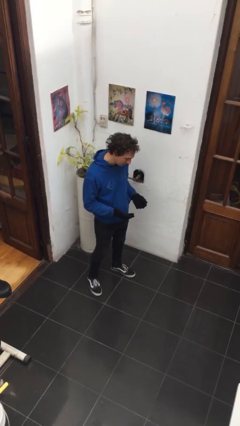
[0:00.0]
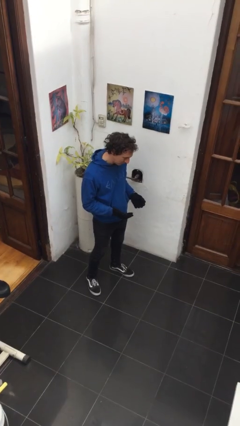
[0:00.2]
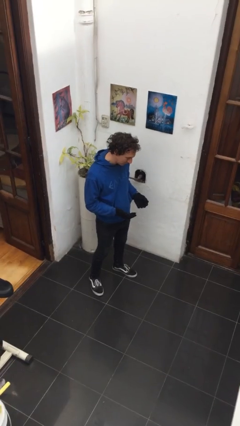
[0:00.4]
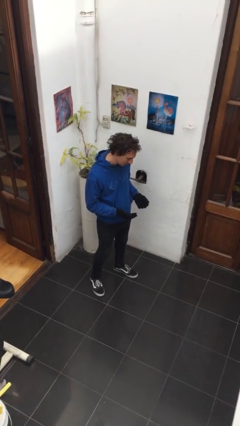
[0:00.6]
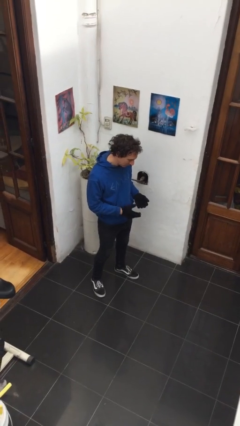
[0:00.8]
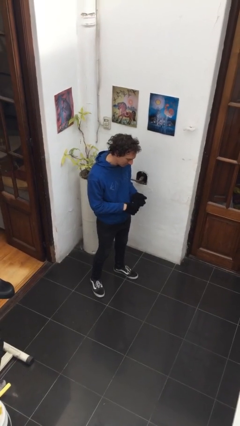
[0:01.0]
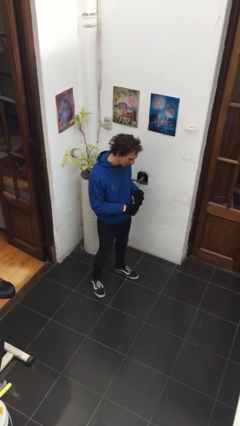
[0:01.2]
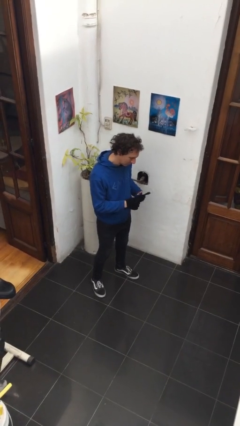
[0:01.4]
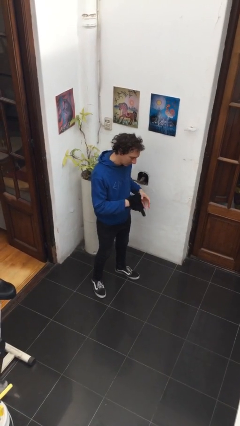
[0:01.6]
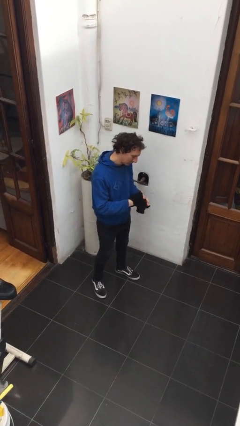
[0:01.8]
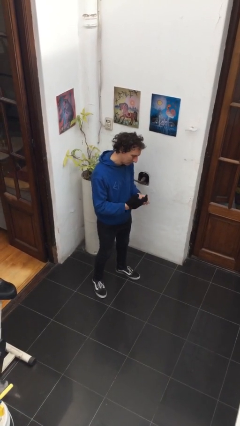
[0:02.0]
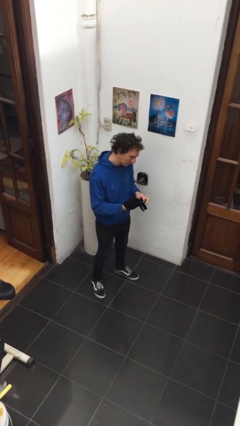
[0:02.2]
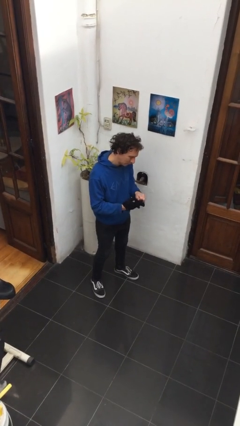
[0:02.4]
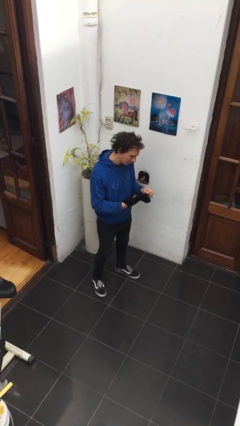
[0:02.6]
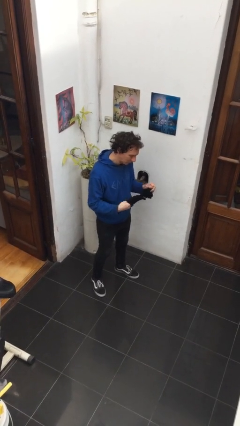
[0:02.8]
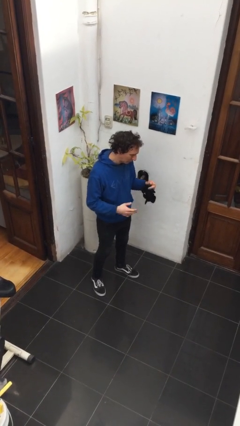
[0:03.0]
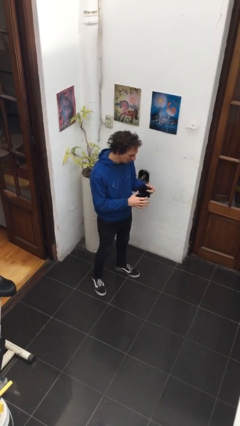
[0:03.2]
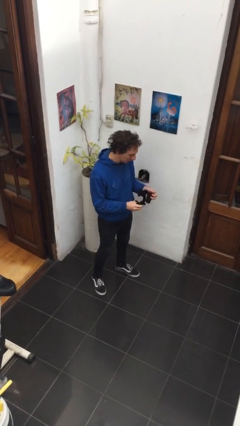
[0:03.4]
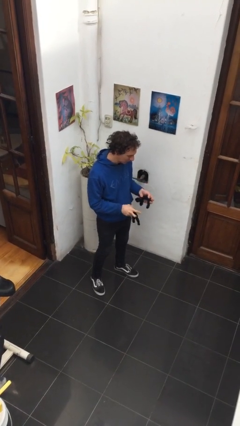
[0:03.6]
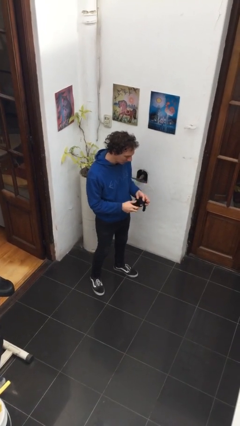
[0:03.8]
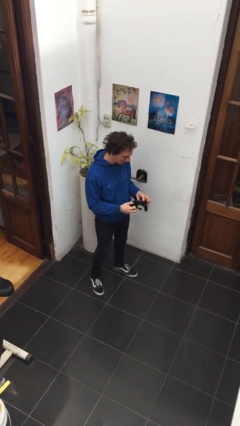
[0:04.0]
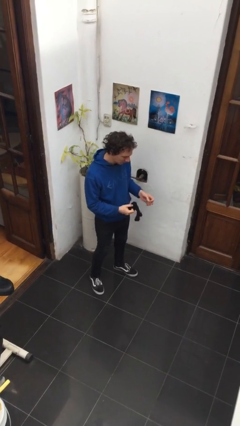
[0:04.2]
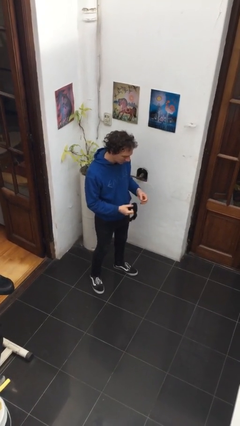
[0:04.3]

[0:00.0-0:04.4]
person takes off gloves

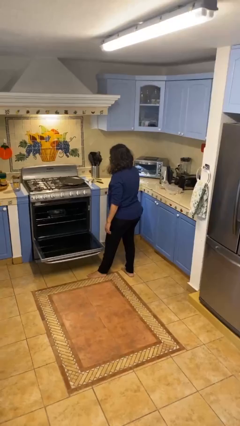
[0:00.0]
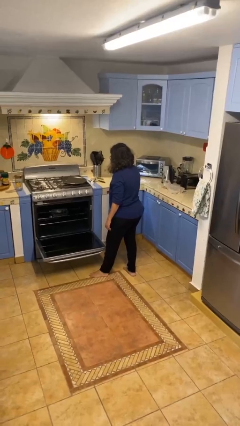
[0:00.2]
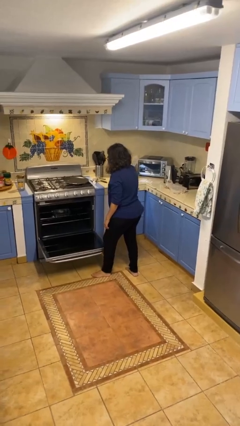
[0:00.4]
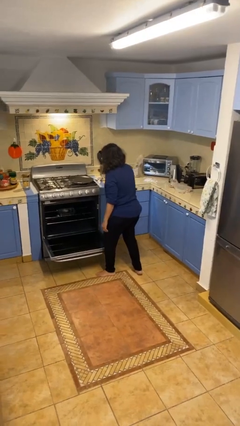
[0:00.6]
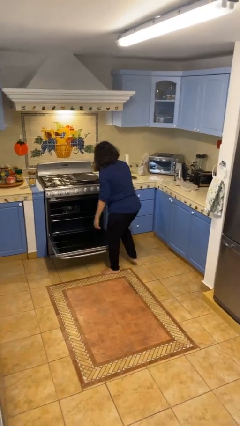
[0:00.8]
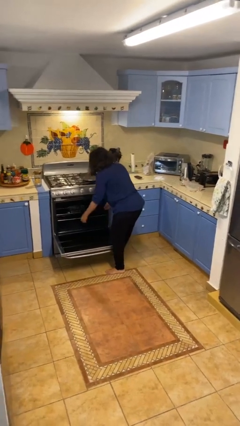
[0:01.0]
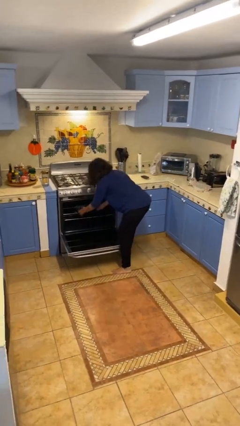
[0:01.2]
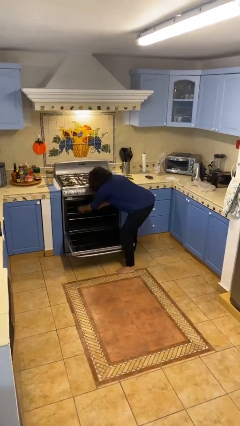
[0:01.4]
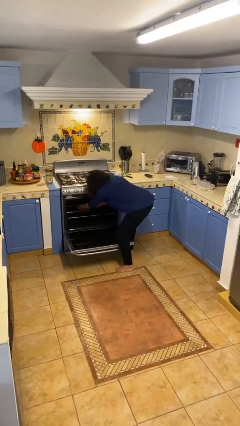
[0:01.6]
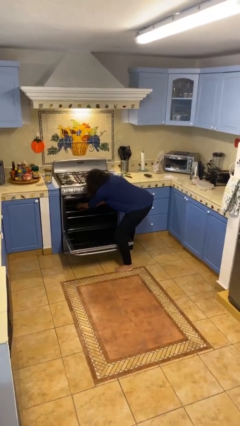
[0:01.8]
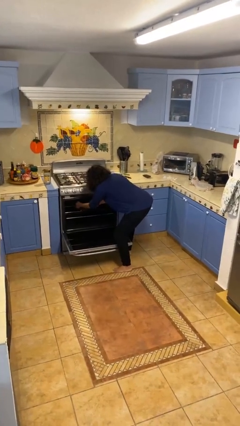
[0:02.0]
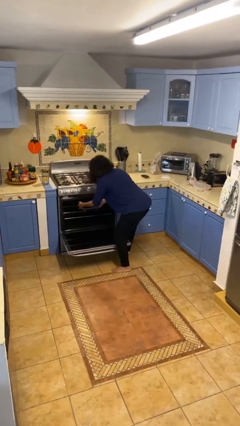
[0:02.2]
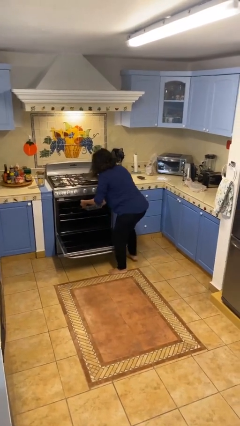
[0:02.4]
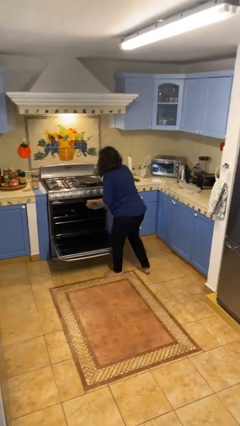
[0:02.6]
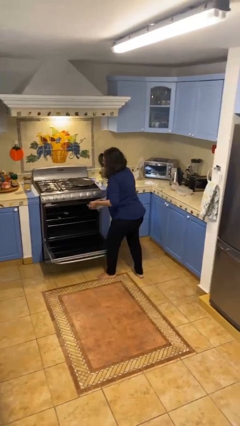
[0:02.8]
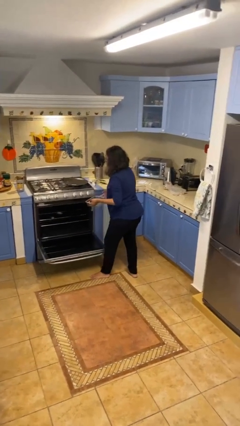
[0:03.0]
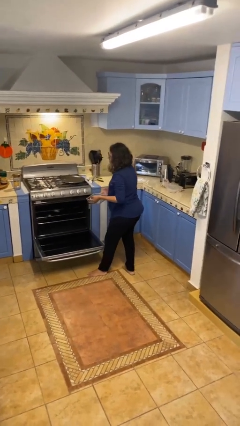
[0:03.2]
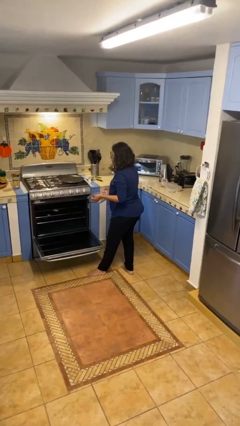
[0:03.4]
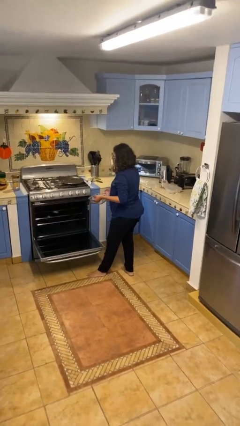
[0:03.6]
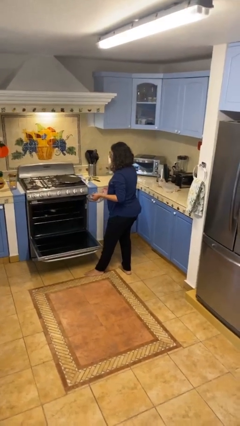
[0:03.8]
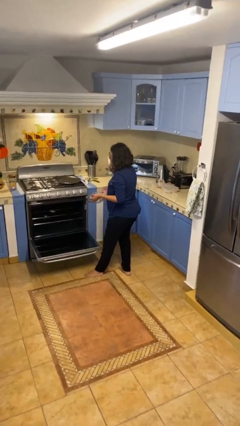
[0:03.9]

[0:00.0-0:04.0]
person takes object from oven

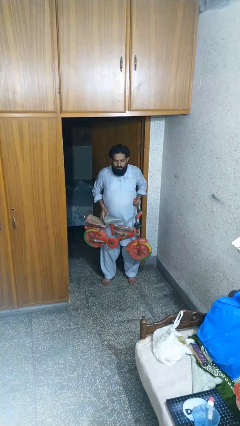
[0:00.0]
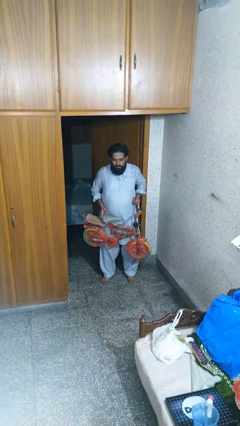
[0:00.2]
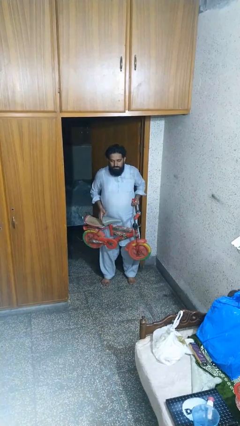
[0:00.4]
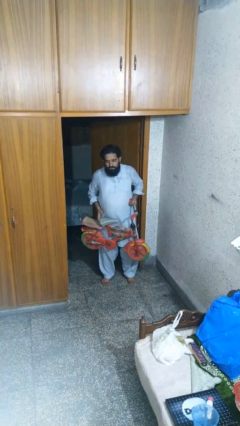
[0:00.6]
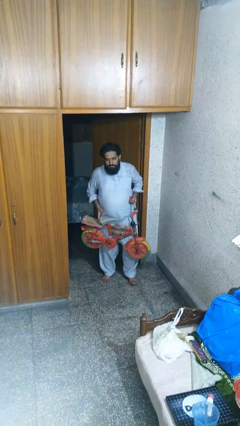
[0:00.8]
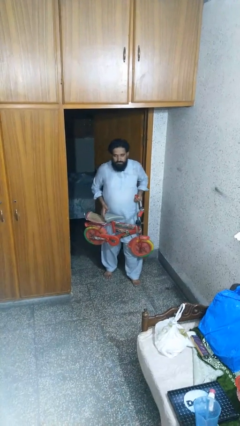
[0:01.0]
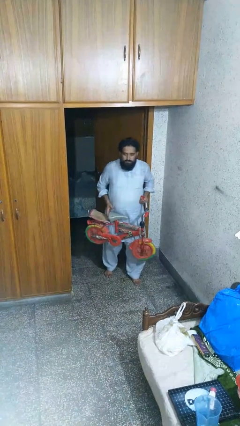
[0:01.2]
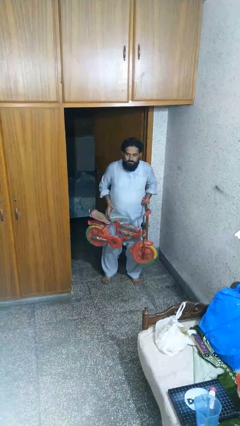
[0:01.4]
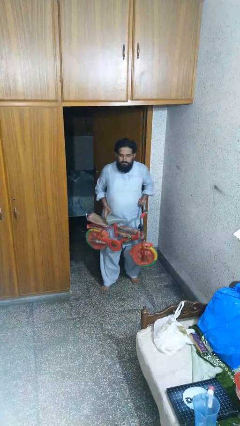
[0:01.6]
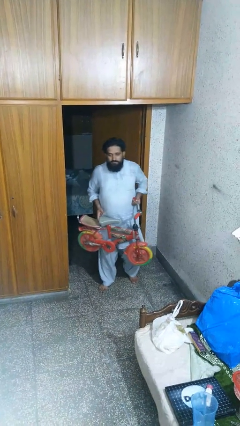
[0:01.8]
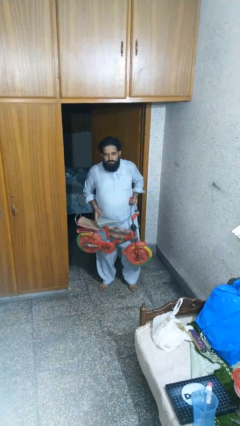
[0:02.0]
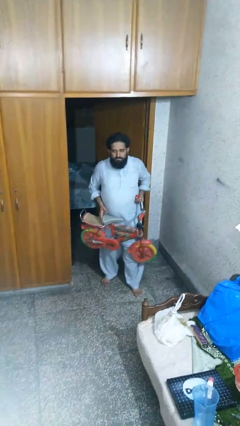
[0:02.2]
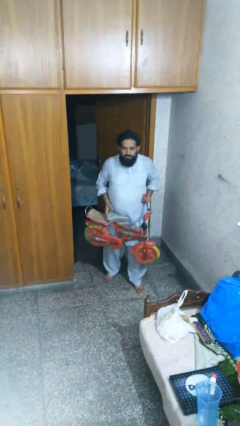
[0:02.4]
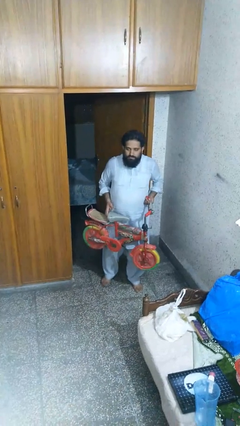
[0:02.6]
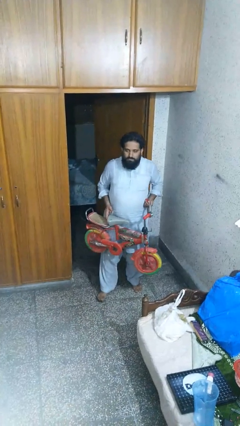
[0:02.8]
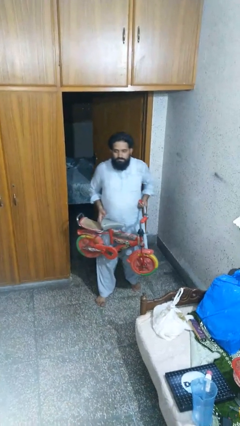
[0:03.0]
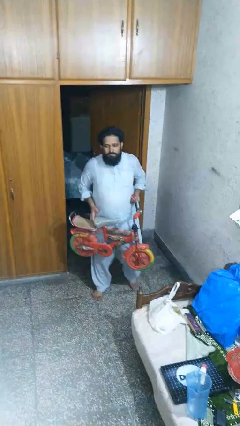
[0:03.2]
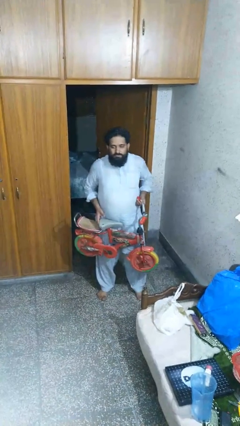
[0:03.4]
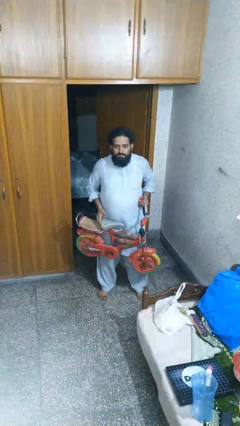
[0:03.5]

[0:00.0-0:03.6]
person carries bicycle

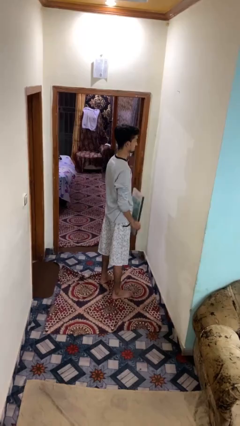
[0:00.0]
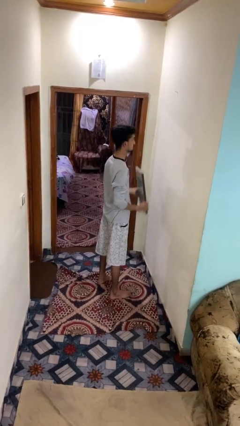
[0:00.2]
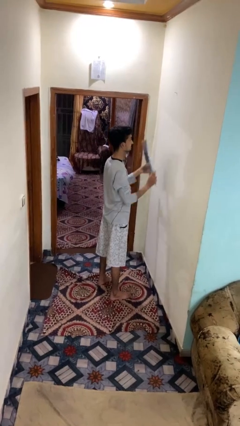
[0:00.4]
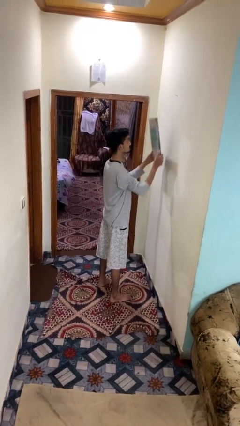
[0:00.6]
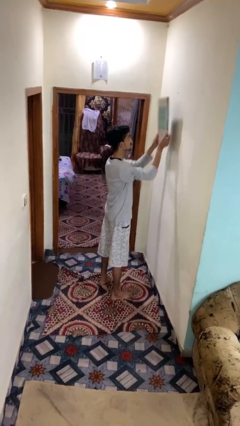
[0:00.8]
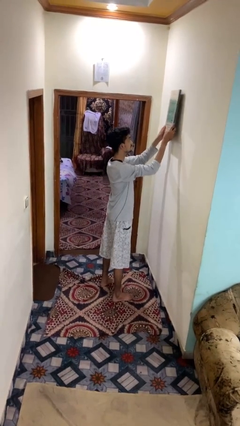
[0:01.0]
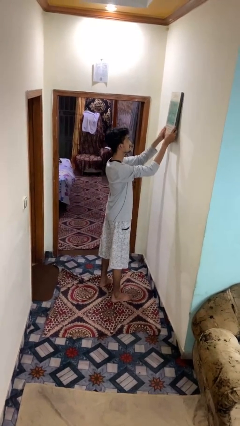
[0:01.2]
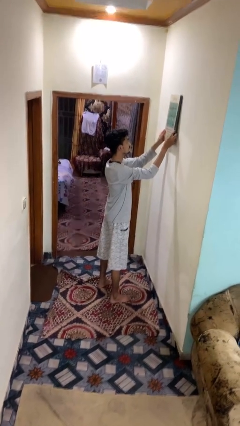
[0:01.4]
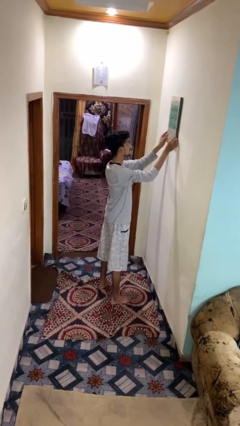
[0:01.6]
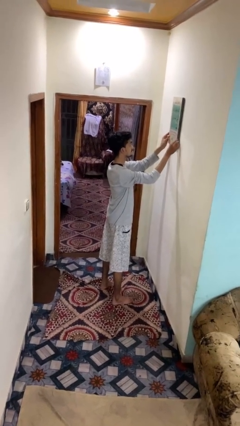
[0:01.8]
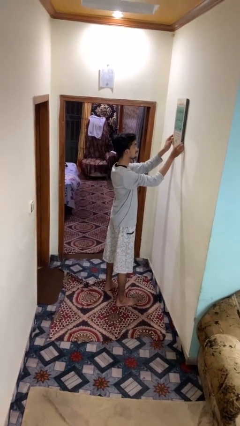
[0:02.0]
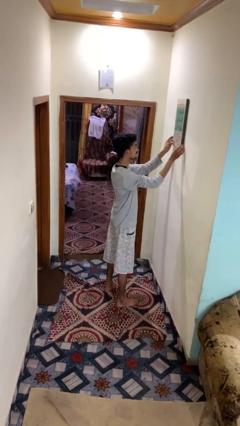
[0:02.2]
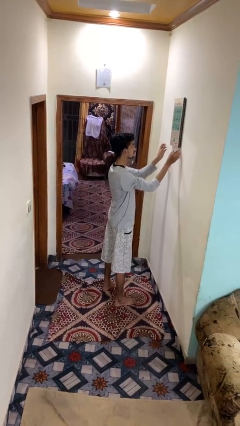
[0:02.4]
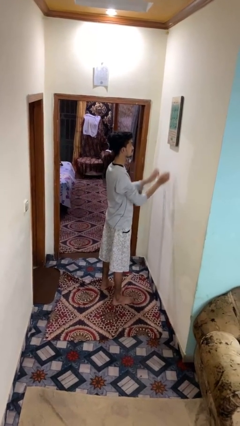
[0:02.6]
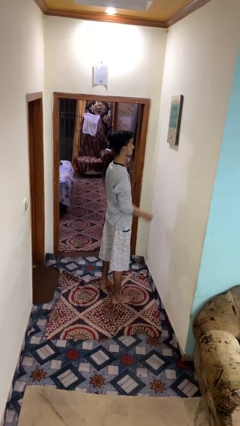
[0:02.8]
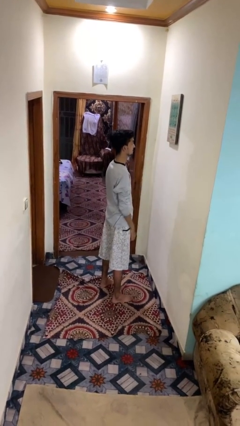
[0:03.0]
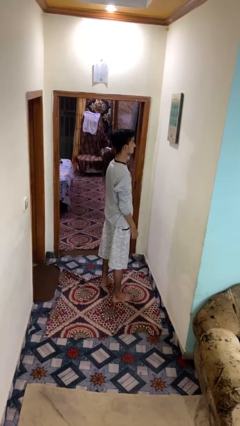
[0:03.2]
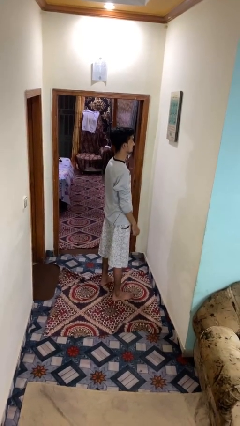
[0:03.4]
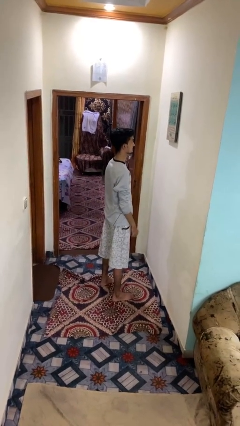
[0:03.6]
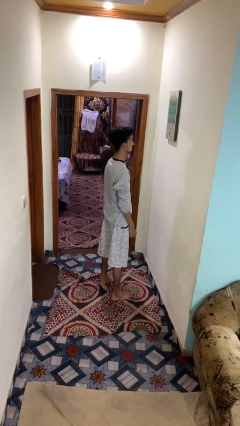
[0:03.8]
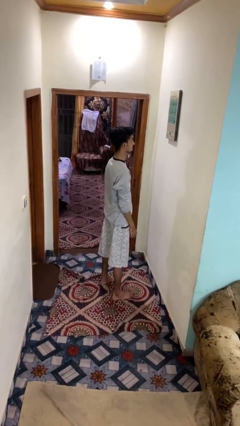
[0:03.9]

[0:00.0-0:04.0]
person puts up picture frame

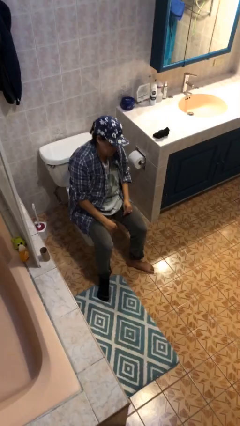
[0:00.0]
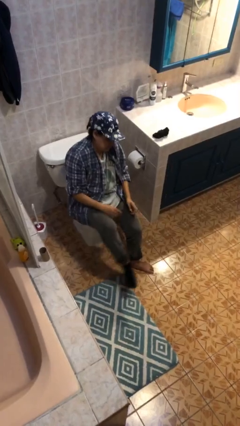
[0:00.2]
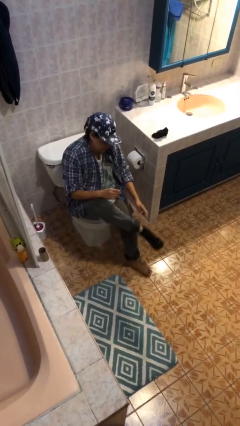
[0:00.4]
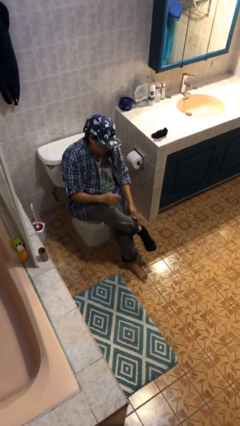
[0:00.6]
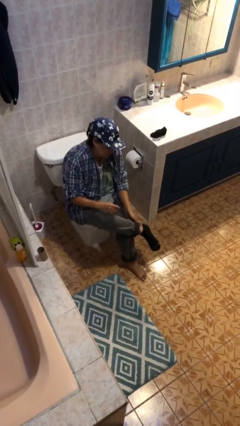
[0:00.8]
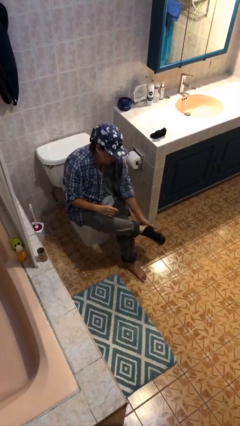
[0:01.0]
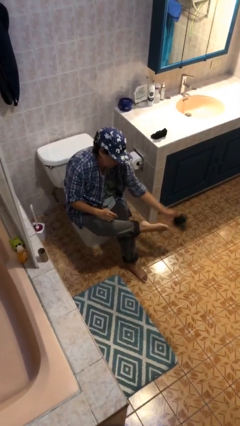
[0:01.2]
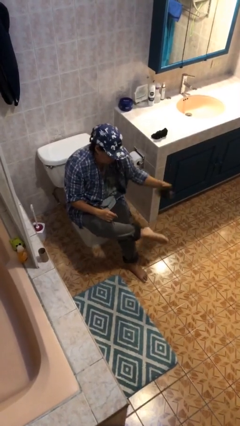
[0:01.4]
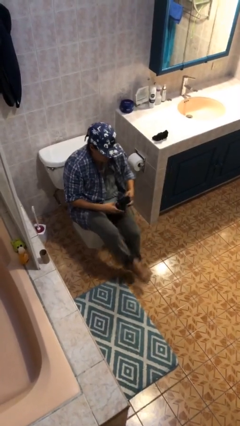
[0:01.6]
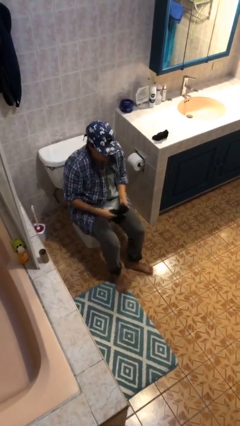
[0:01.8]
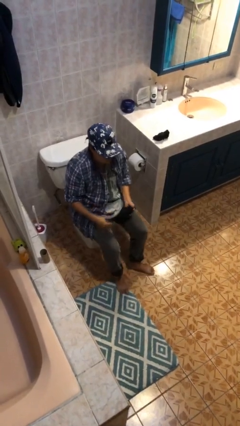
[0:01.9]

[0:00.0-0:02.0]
person takes off socks
